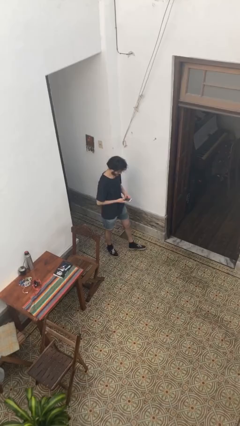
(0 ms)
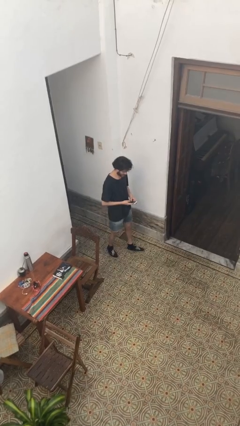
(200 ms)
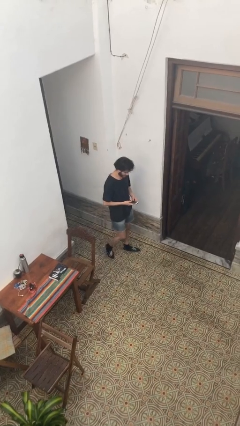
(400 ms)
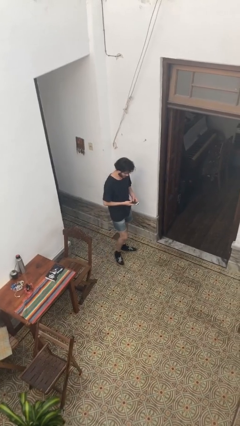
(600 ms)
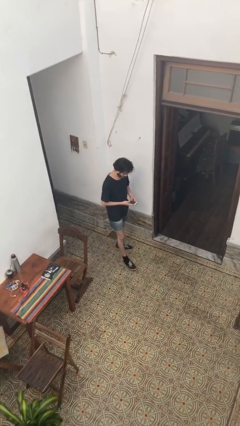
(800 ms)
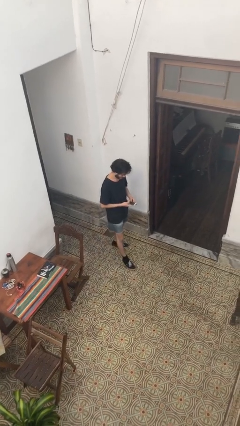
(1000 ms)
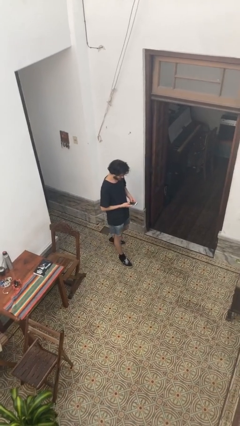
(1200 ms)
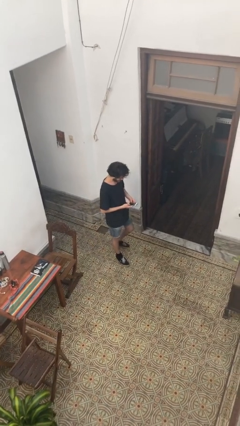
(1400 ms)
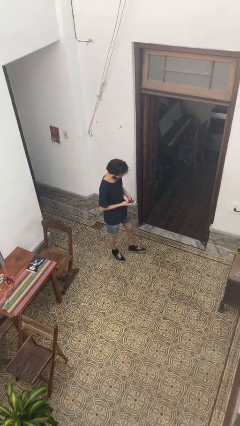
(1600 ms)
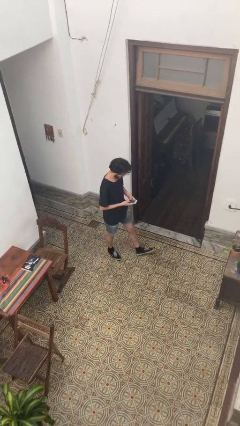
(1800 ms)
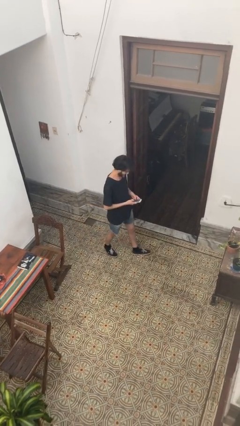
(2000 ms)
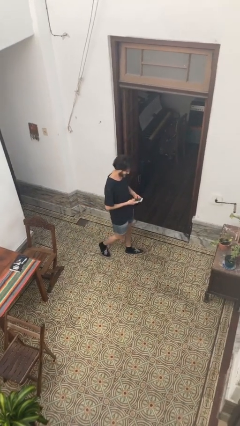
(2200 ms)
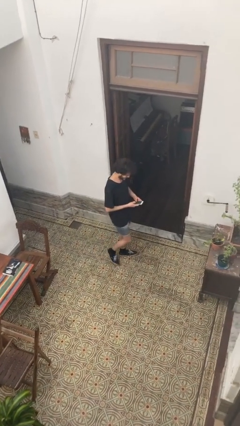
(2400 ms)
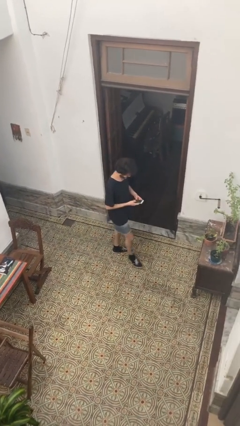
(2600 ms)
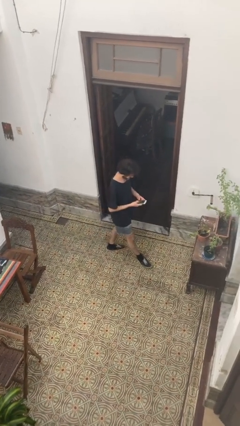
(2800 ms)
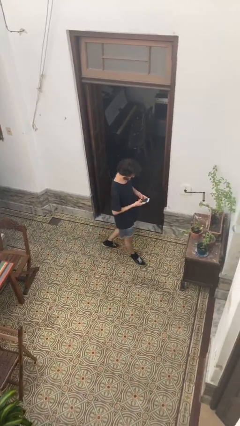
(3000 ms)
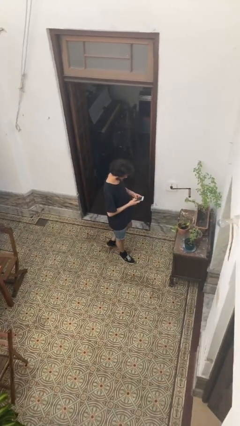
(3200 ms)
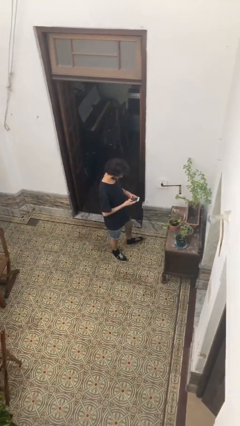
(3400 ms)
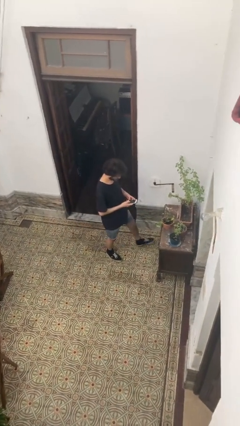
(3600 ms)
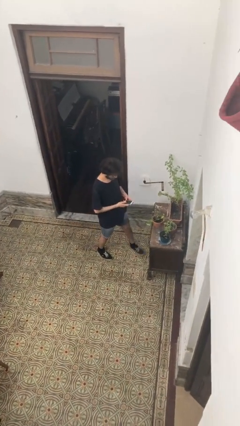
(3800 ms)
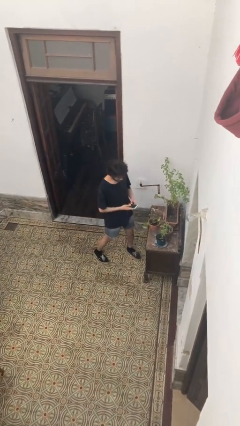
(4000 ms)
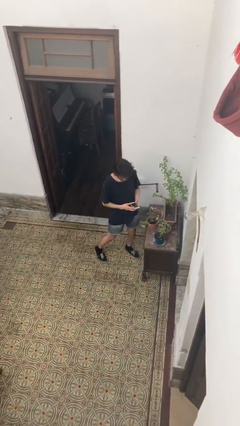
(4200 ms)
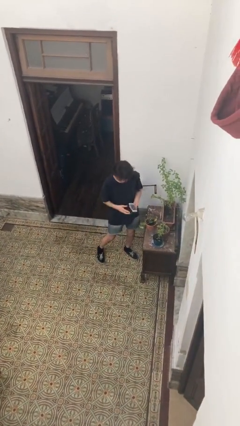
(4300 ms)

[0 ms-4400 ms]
person texts on phone

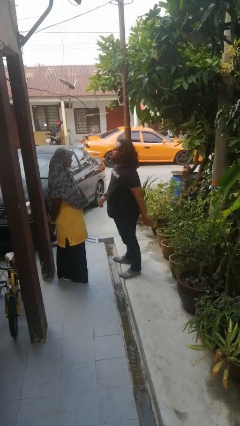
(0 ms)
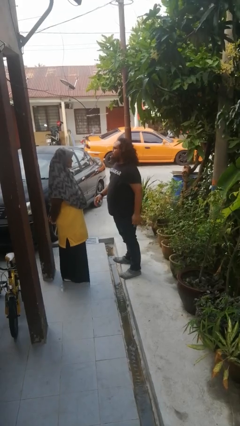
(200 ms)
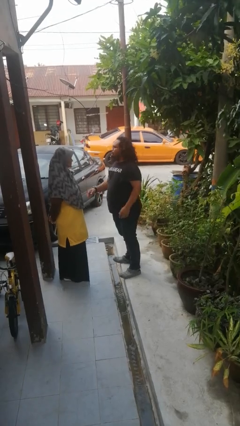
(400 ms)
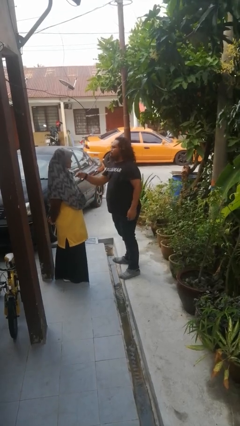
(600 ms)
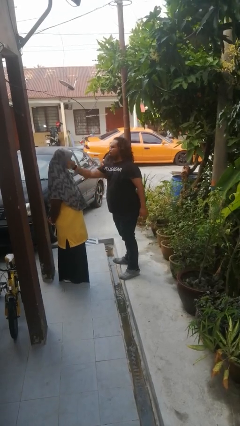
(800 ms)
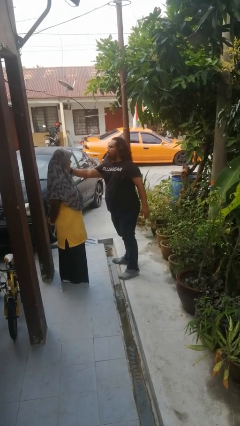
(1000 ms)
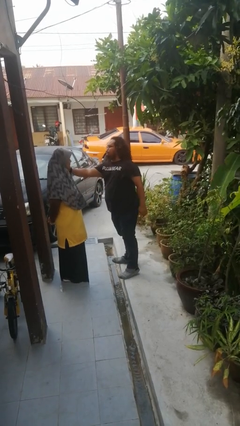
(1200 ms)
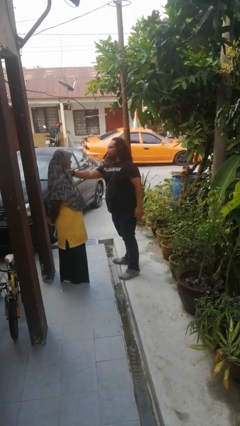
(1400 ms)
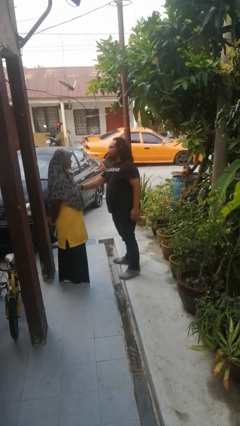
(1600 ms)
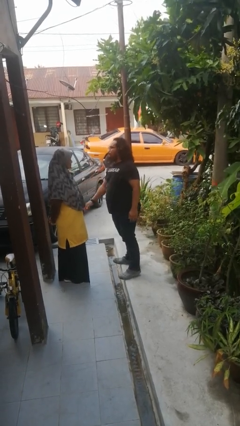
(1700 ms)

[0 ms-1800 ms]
person pounds shoulders of person

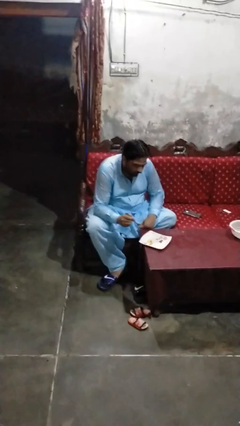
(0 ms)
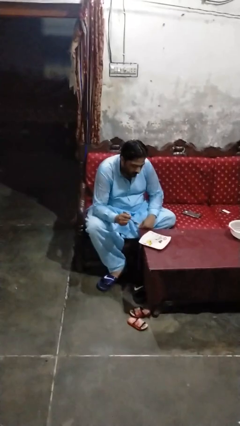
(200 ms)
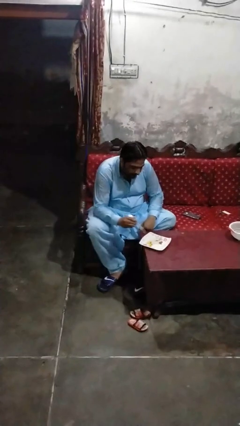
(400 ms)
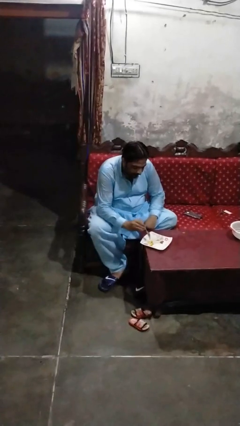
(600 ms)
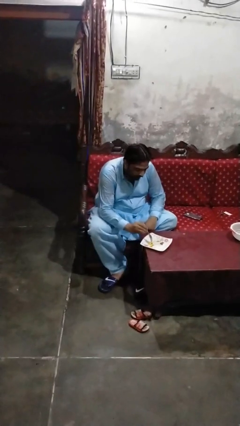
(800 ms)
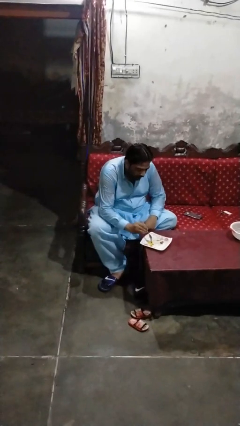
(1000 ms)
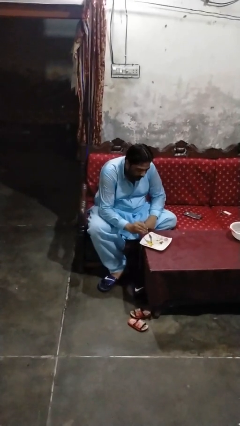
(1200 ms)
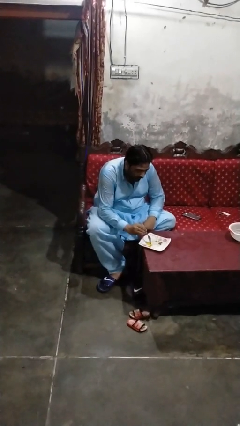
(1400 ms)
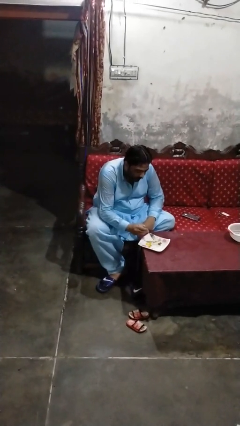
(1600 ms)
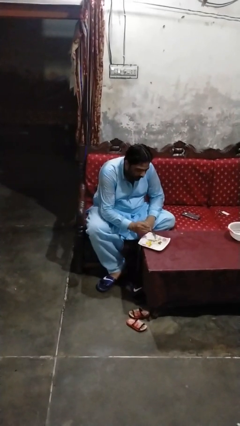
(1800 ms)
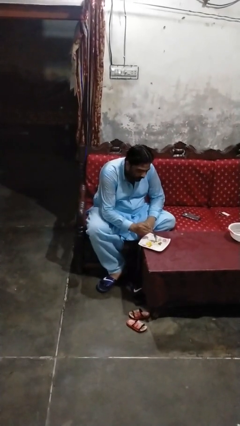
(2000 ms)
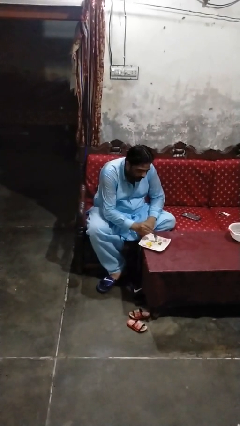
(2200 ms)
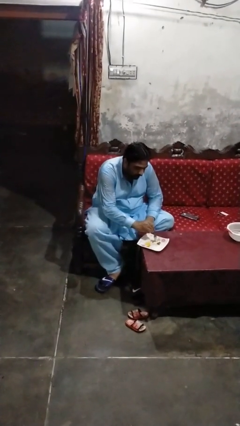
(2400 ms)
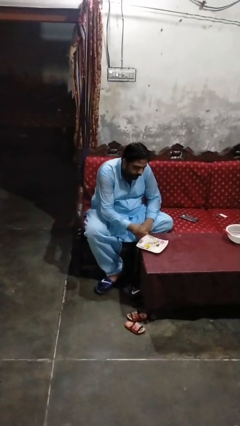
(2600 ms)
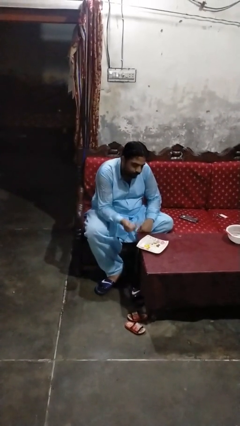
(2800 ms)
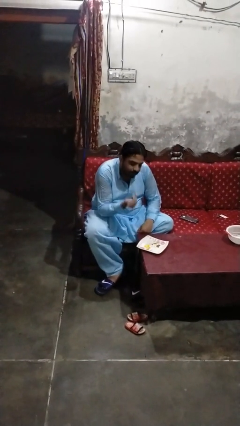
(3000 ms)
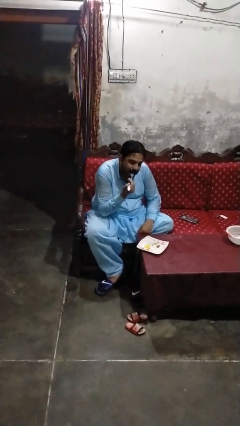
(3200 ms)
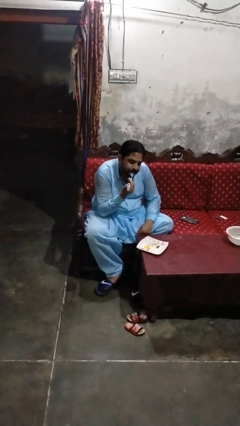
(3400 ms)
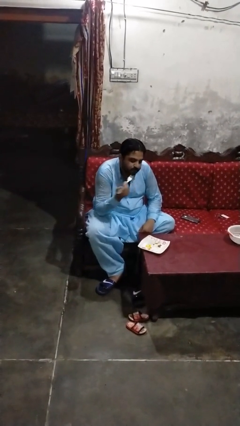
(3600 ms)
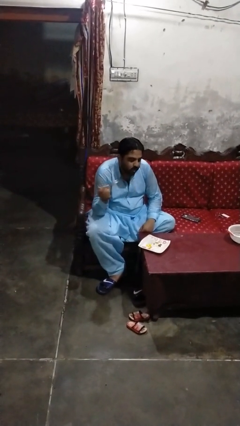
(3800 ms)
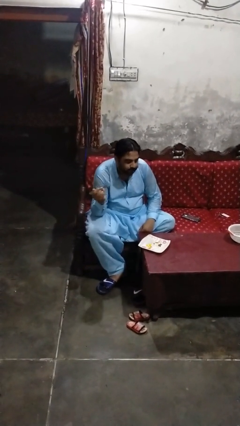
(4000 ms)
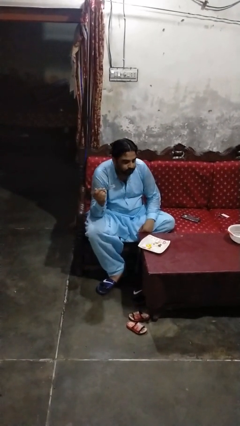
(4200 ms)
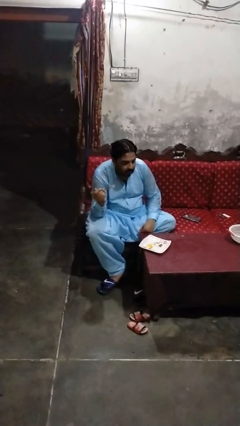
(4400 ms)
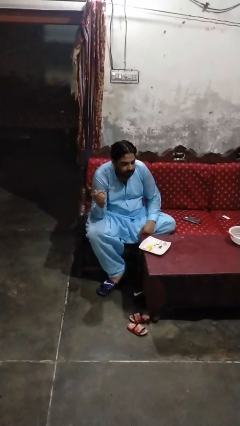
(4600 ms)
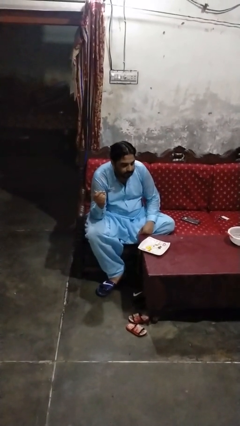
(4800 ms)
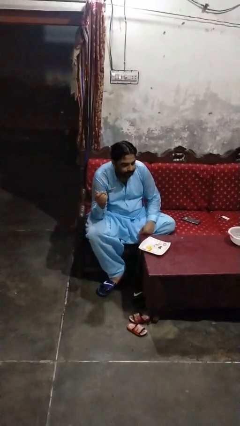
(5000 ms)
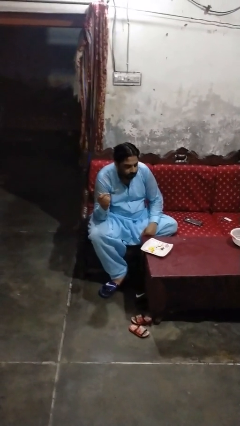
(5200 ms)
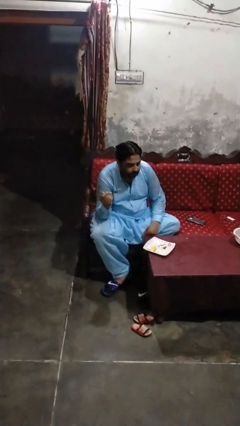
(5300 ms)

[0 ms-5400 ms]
person eats with utensil

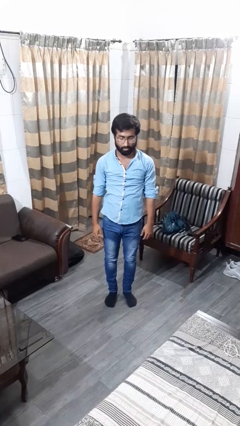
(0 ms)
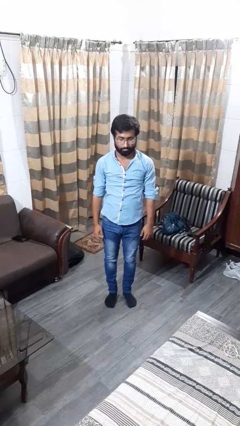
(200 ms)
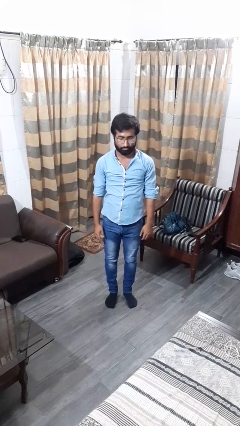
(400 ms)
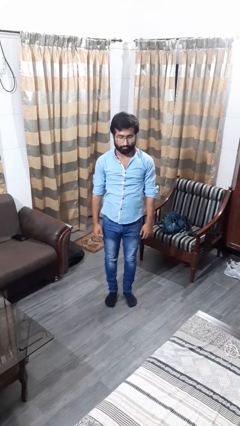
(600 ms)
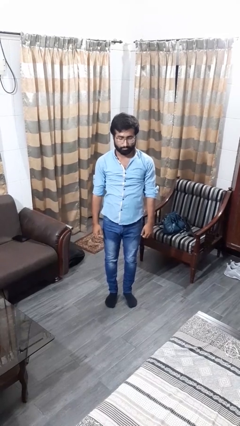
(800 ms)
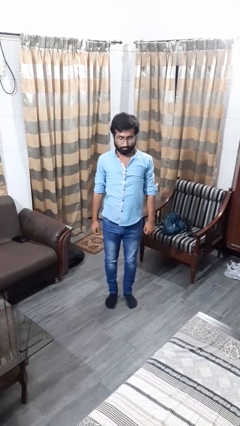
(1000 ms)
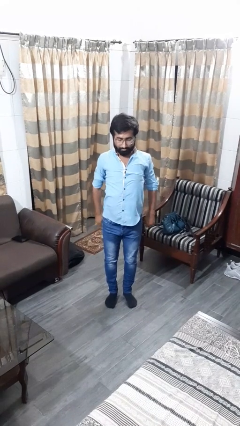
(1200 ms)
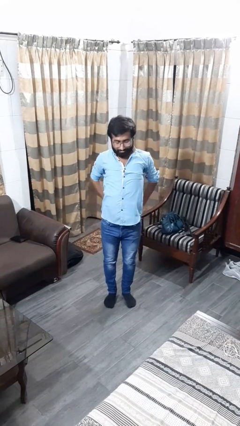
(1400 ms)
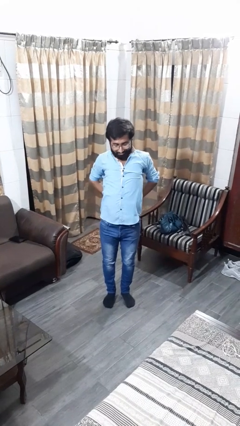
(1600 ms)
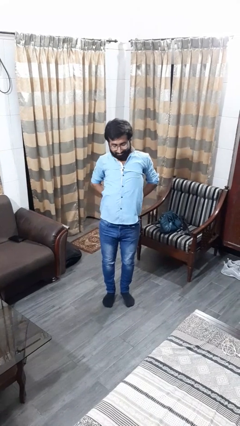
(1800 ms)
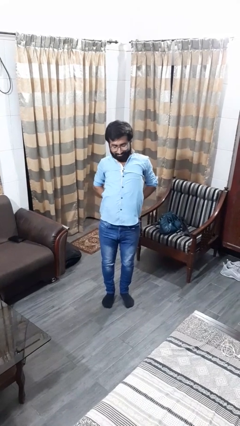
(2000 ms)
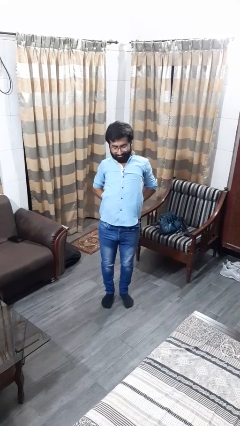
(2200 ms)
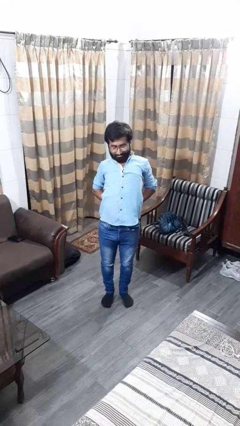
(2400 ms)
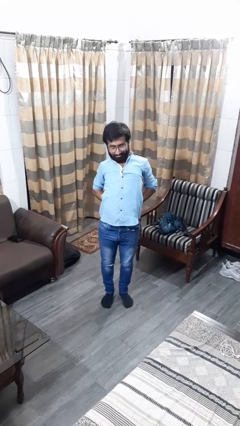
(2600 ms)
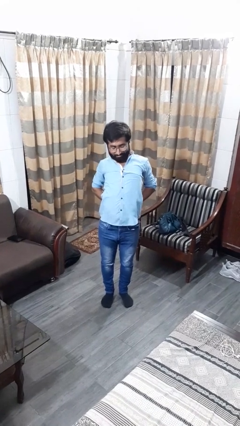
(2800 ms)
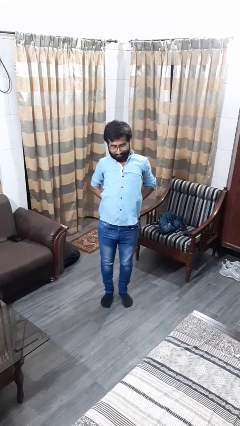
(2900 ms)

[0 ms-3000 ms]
person stretches back

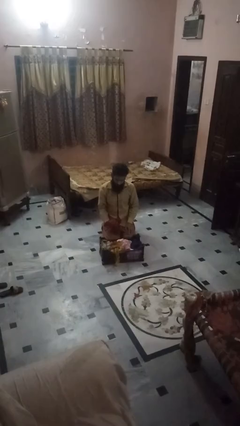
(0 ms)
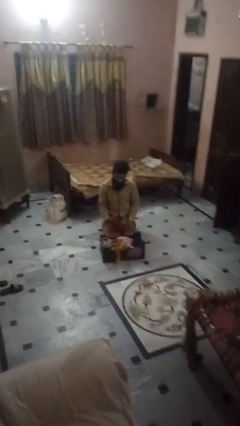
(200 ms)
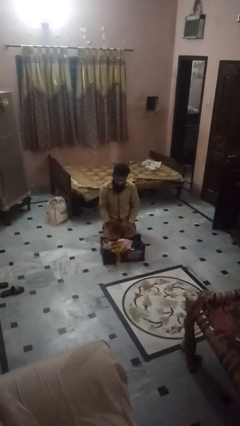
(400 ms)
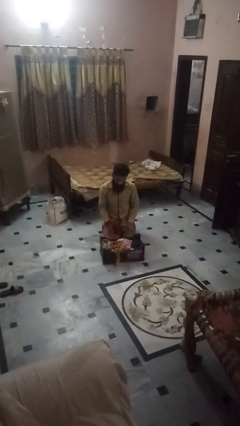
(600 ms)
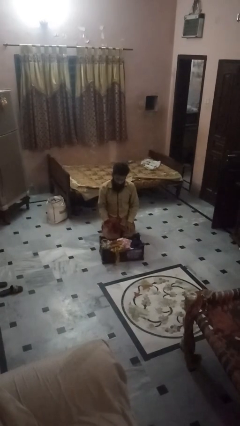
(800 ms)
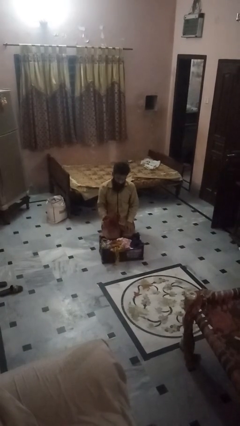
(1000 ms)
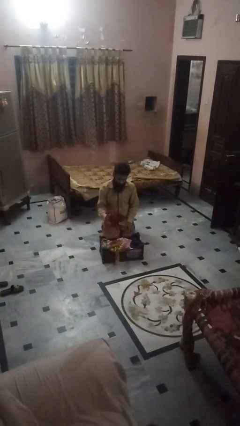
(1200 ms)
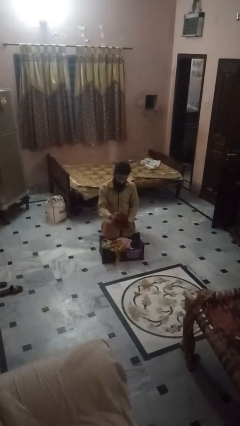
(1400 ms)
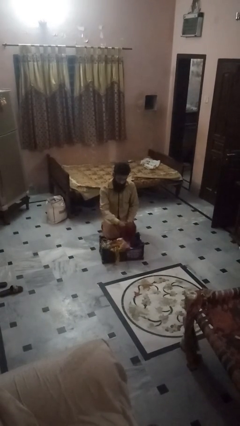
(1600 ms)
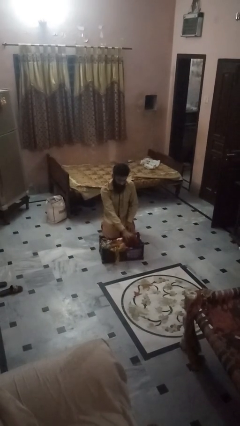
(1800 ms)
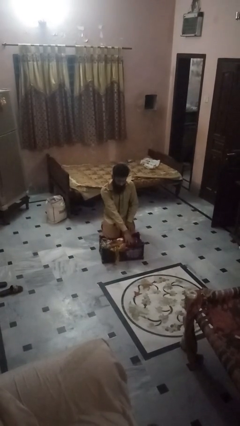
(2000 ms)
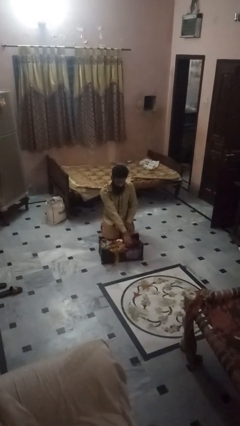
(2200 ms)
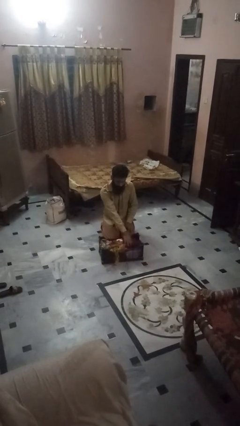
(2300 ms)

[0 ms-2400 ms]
person takes object from basket

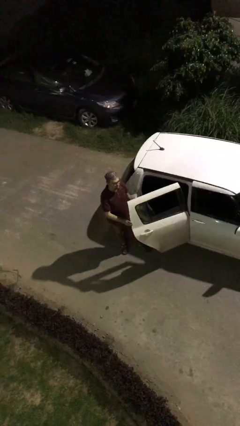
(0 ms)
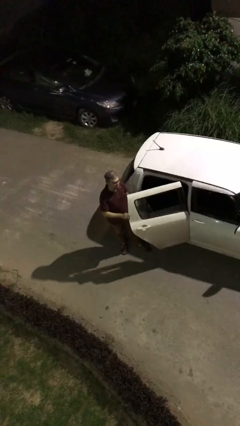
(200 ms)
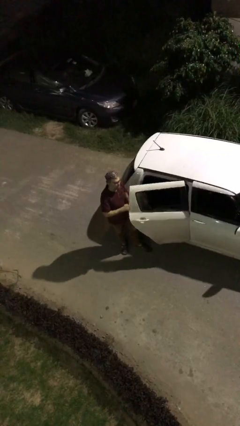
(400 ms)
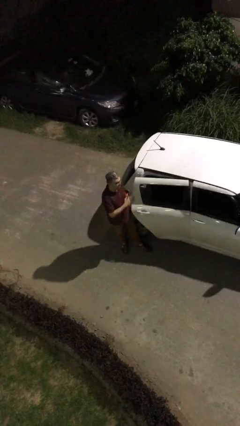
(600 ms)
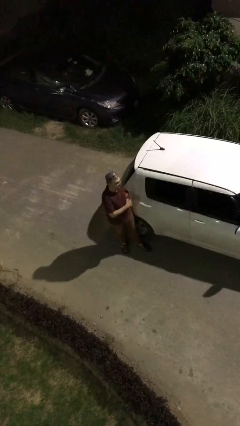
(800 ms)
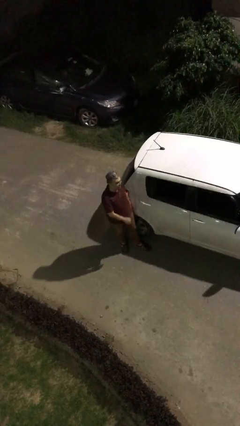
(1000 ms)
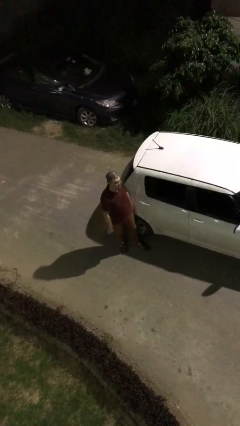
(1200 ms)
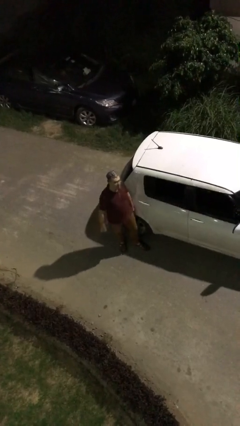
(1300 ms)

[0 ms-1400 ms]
person closes car door
